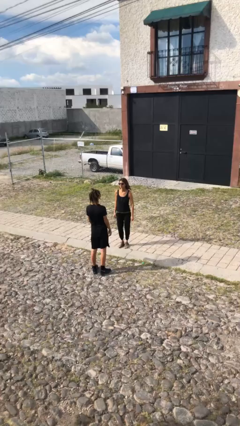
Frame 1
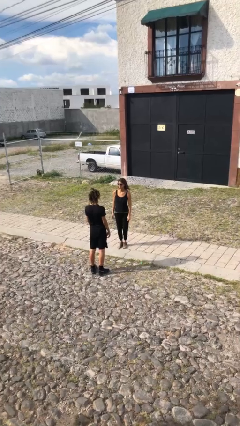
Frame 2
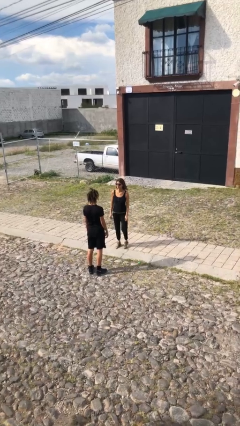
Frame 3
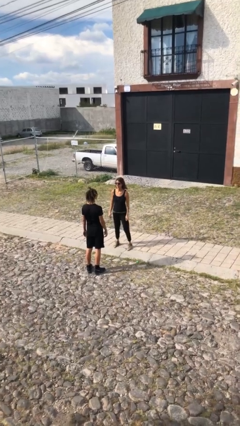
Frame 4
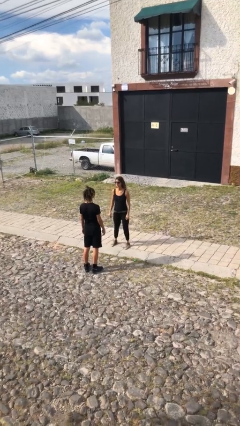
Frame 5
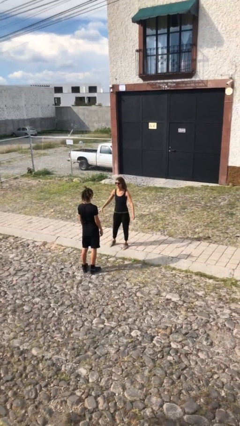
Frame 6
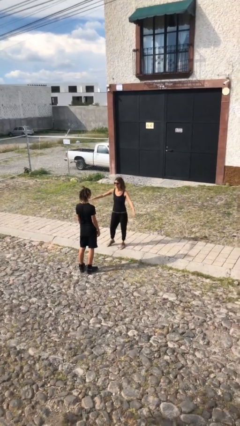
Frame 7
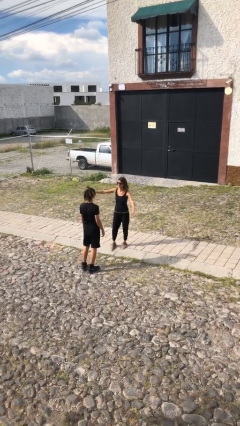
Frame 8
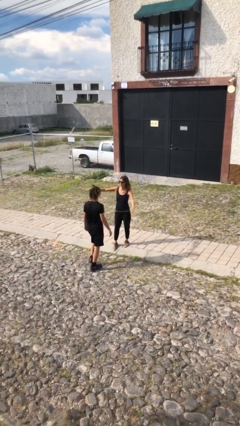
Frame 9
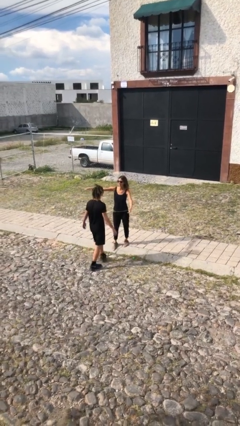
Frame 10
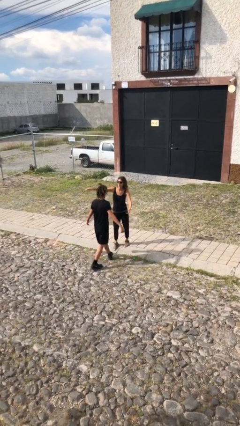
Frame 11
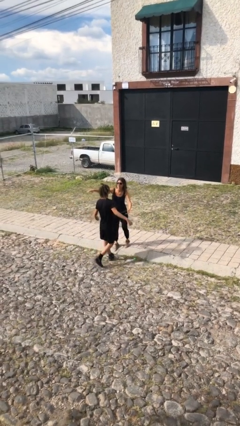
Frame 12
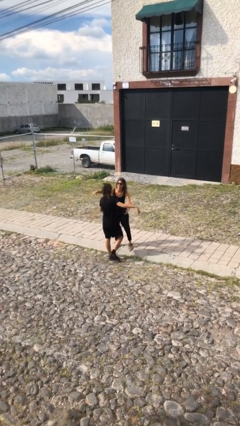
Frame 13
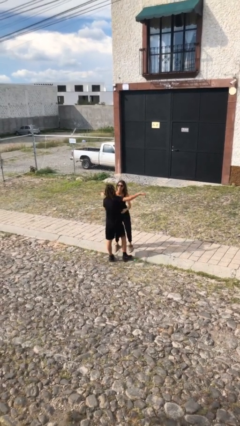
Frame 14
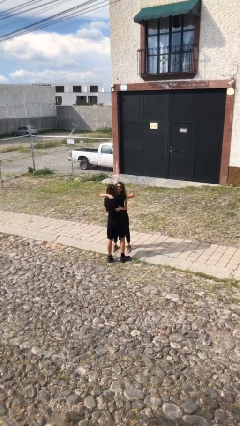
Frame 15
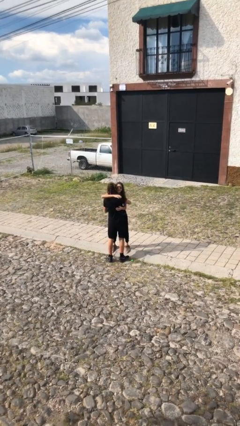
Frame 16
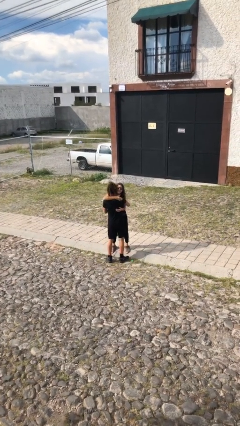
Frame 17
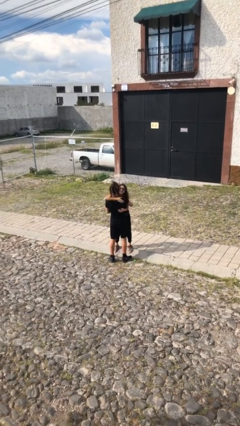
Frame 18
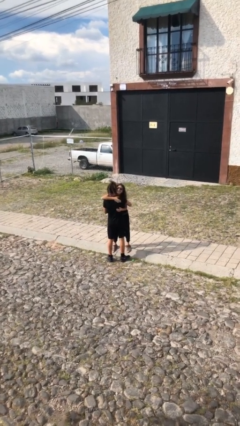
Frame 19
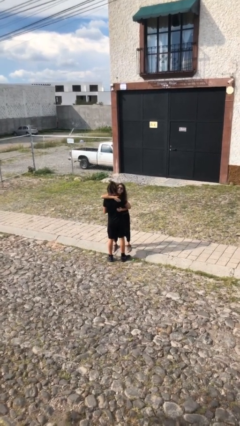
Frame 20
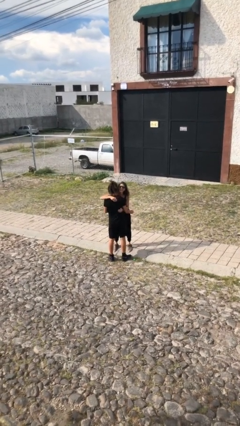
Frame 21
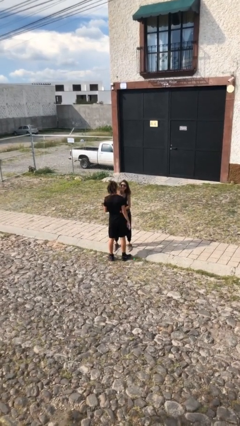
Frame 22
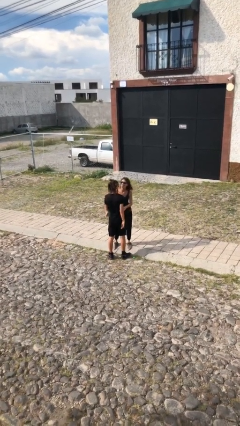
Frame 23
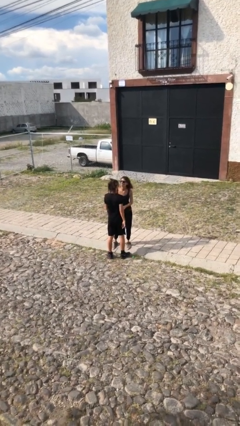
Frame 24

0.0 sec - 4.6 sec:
person embraces person

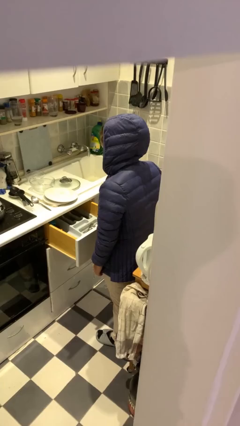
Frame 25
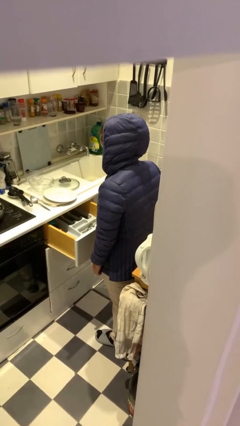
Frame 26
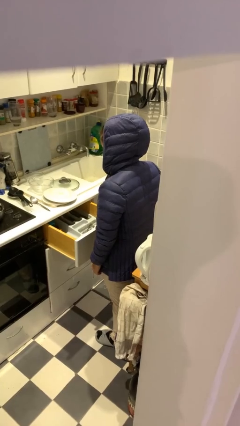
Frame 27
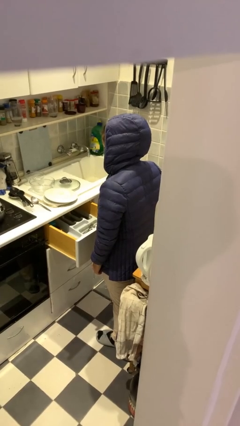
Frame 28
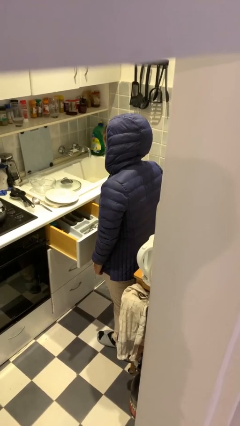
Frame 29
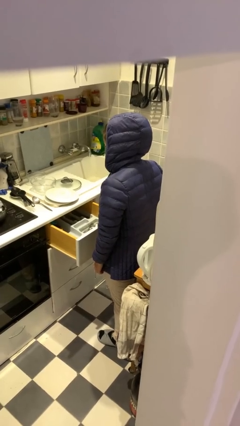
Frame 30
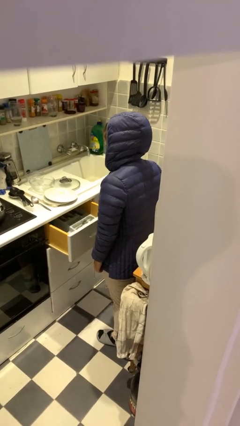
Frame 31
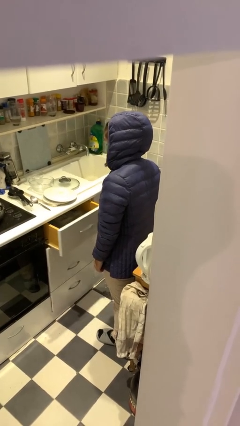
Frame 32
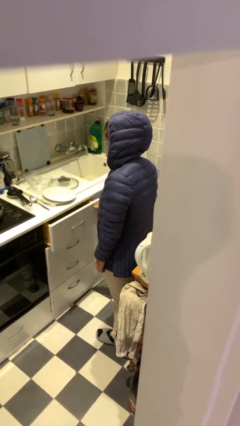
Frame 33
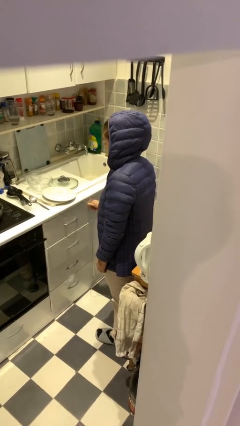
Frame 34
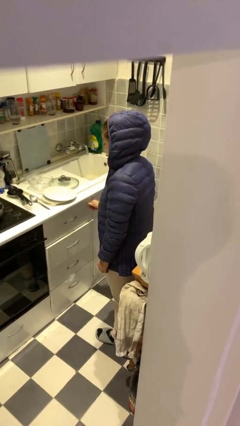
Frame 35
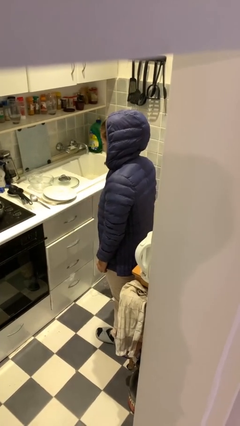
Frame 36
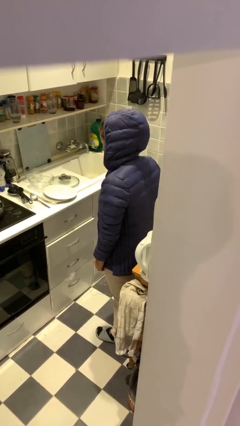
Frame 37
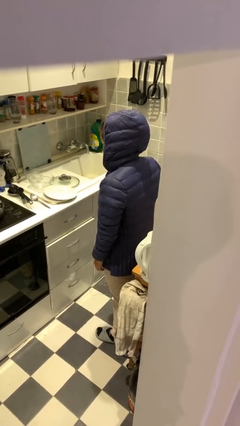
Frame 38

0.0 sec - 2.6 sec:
person closes kitchen drawer

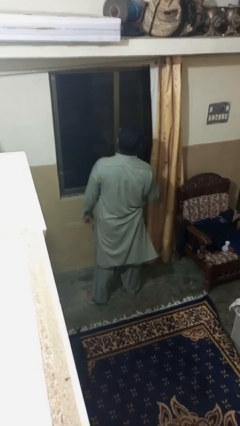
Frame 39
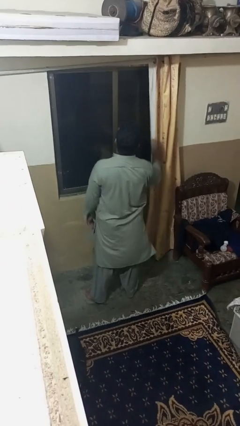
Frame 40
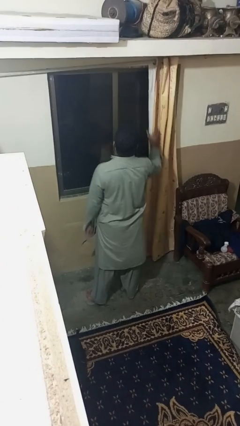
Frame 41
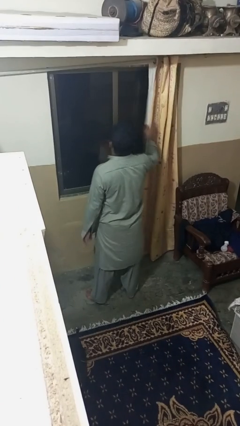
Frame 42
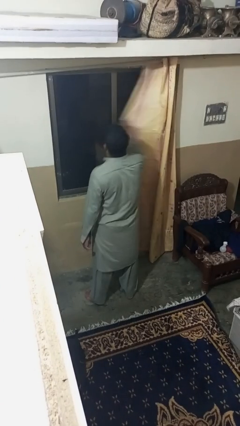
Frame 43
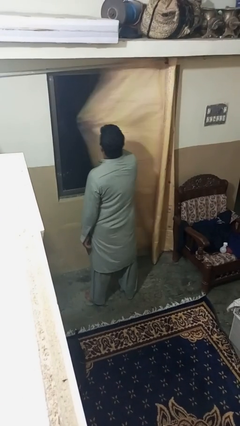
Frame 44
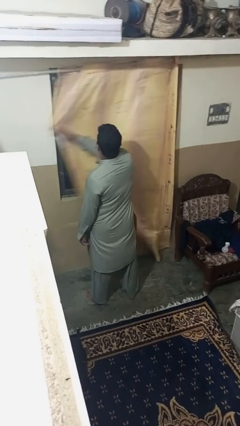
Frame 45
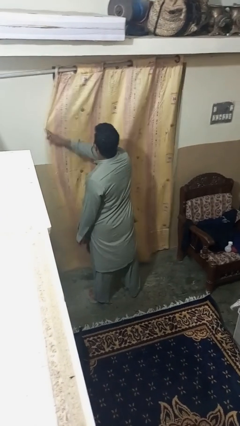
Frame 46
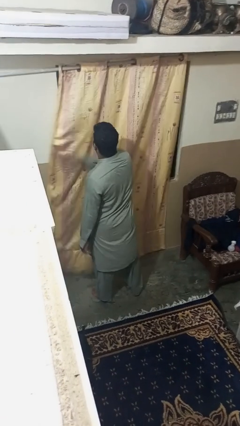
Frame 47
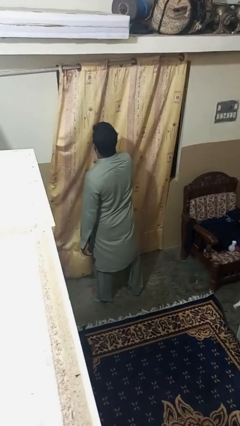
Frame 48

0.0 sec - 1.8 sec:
person closes curtains

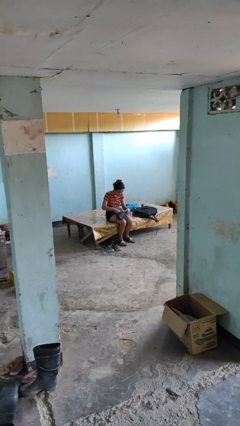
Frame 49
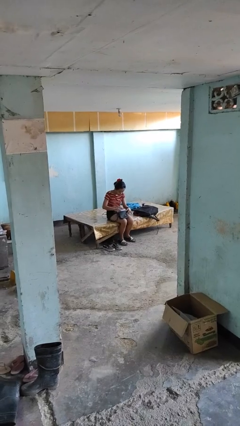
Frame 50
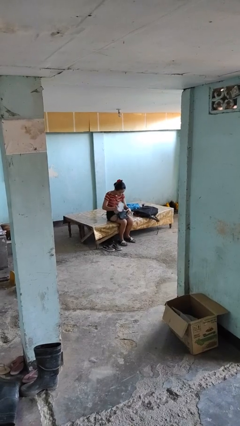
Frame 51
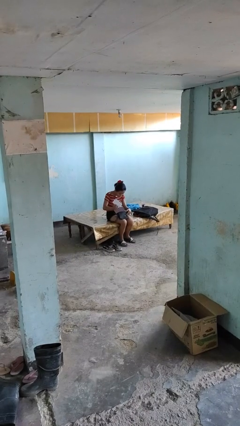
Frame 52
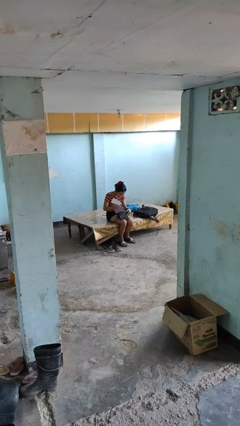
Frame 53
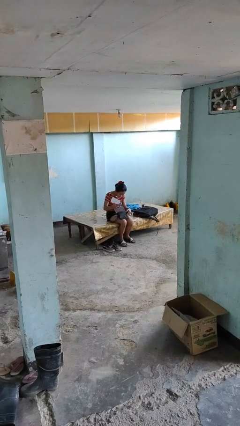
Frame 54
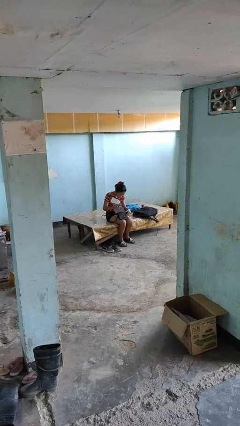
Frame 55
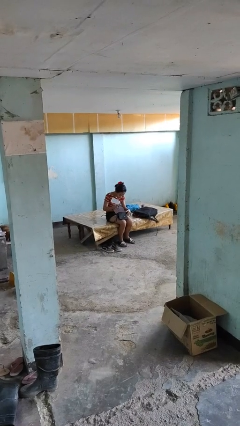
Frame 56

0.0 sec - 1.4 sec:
person takes object from purse

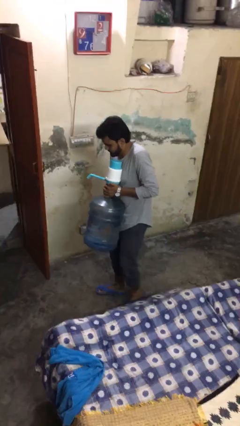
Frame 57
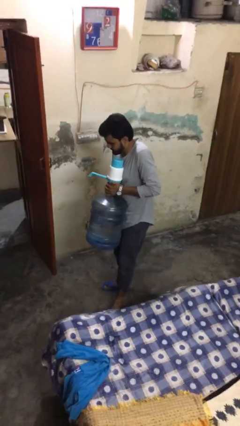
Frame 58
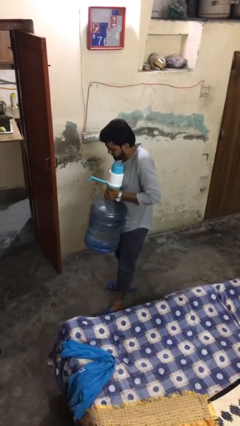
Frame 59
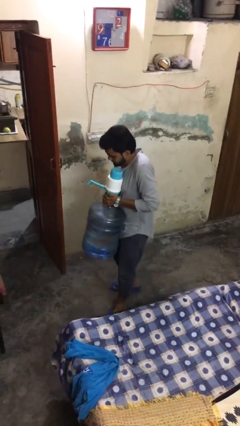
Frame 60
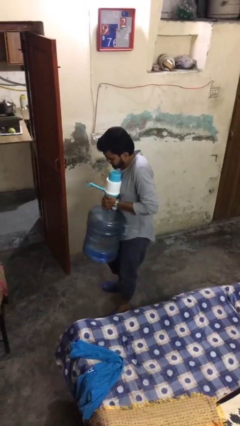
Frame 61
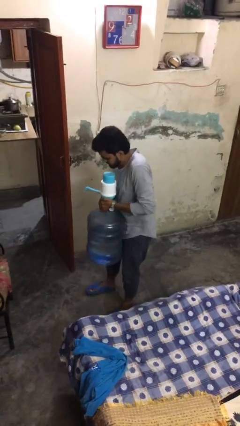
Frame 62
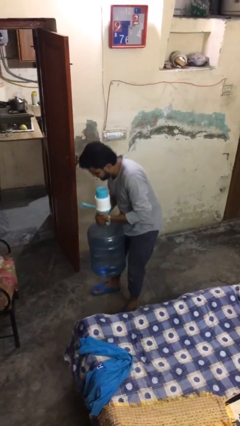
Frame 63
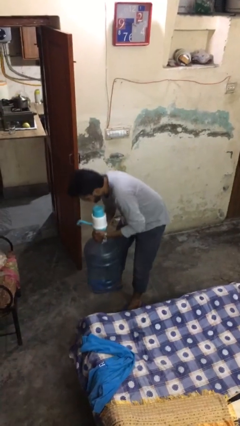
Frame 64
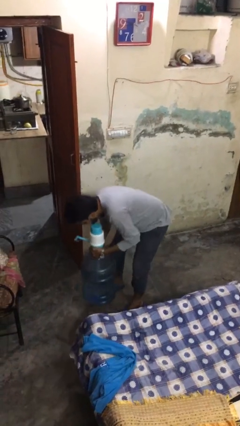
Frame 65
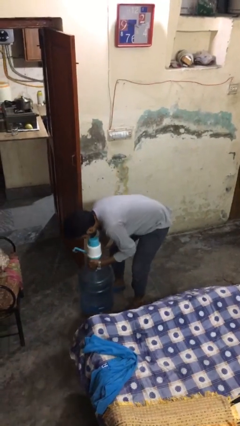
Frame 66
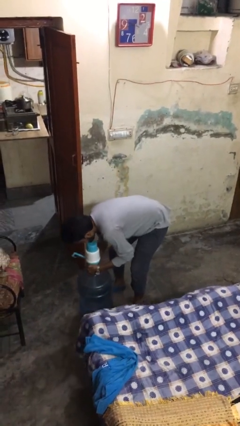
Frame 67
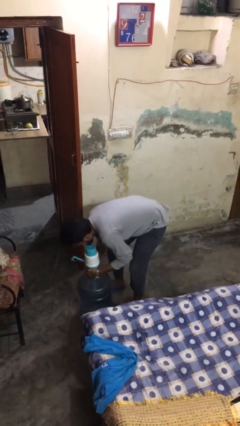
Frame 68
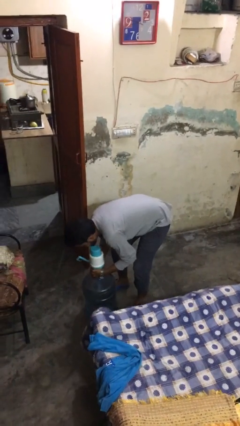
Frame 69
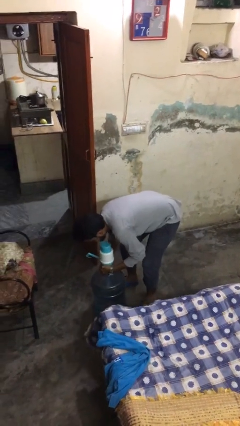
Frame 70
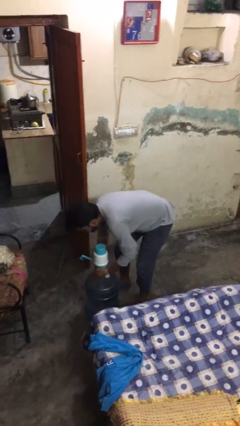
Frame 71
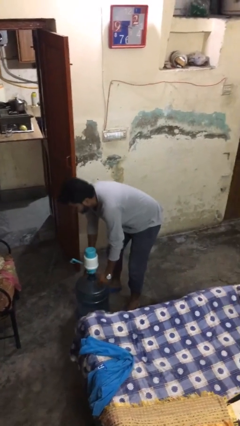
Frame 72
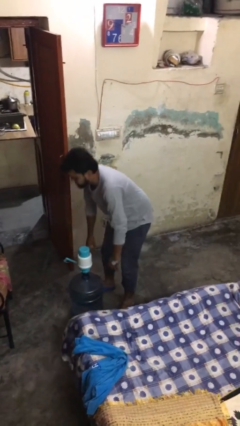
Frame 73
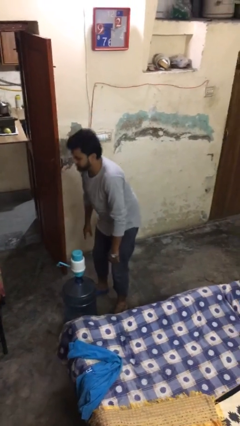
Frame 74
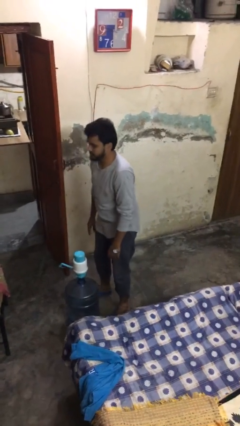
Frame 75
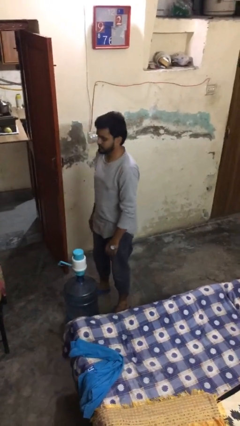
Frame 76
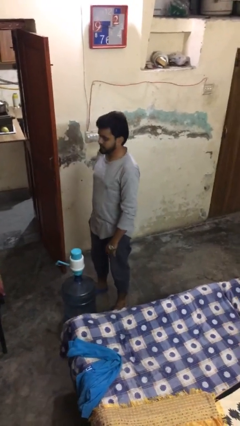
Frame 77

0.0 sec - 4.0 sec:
person puts down object on floor

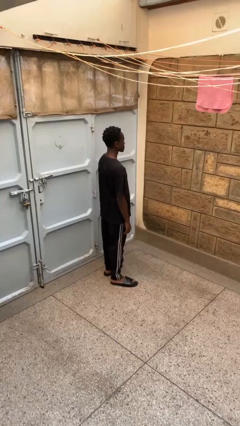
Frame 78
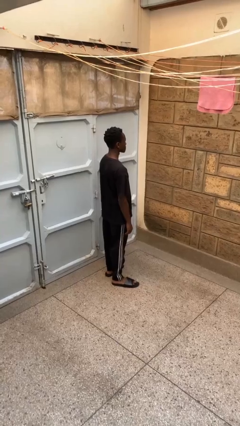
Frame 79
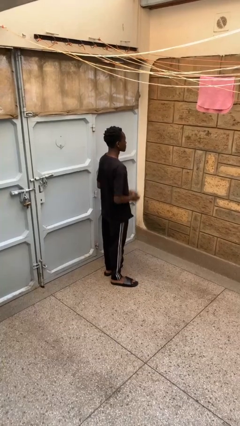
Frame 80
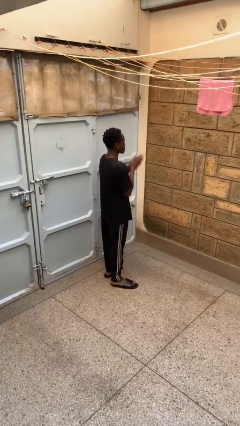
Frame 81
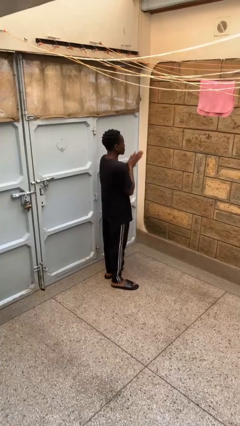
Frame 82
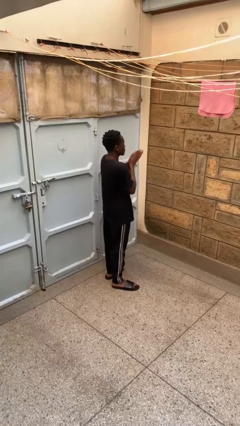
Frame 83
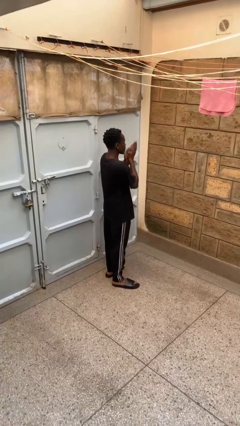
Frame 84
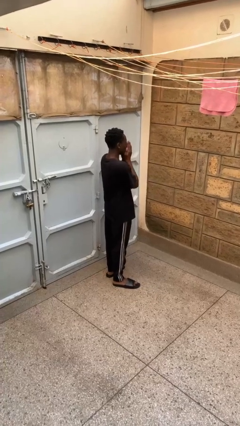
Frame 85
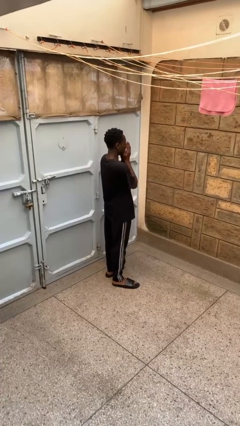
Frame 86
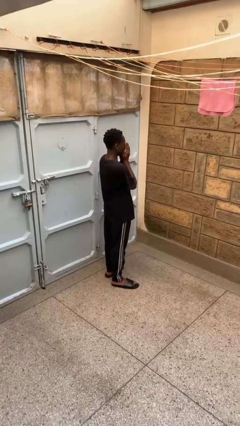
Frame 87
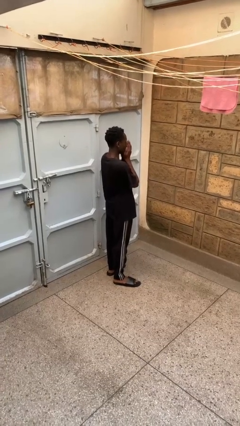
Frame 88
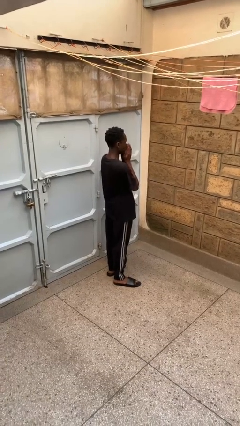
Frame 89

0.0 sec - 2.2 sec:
person blows into hands

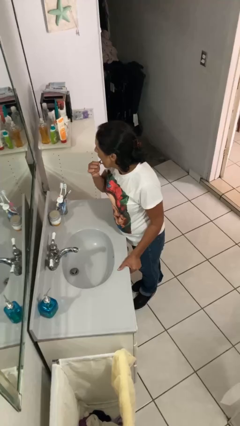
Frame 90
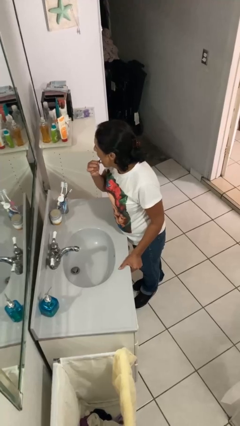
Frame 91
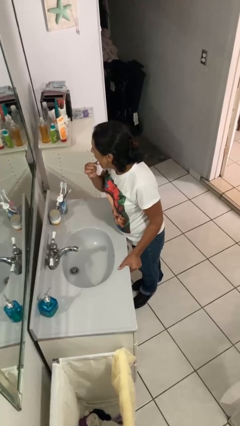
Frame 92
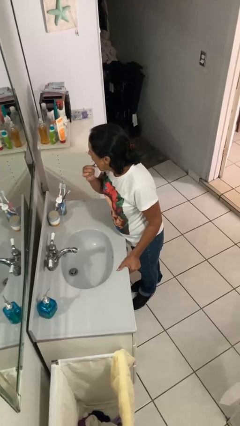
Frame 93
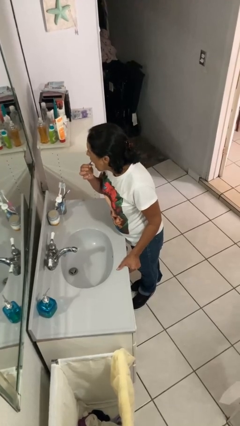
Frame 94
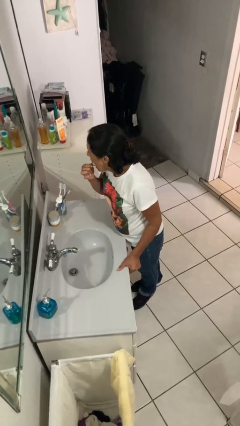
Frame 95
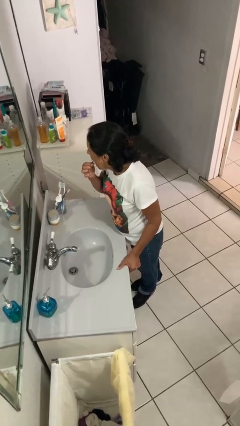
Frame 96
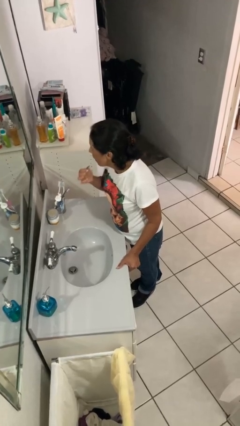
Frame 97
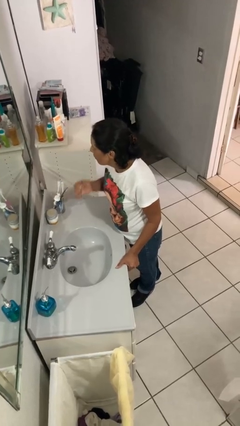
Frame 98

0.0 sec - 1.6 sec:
person flosses
